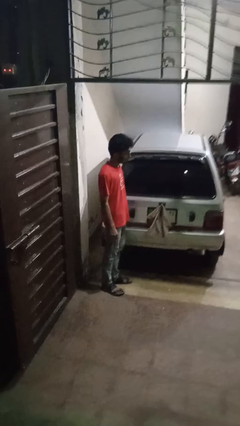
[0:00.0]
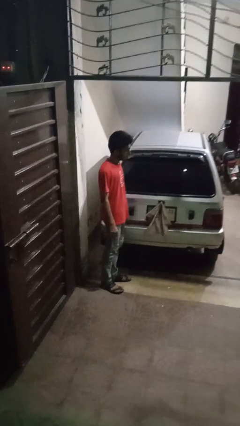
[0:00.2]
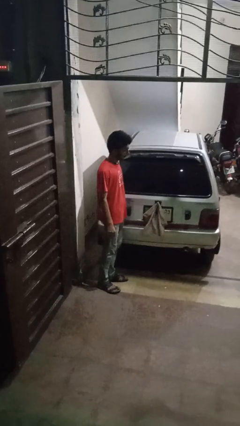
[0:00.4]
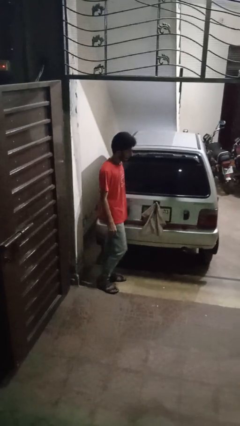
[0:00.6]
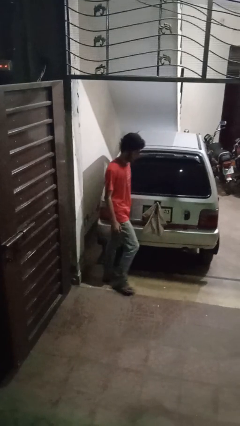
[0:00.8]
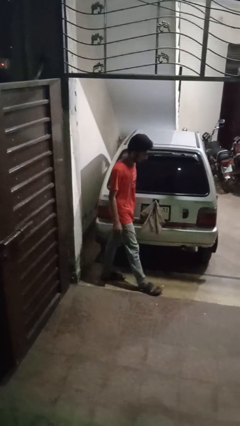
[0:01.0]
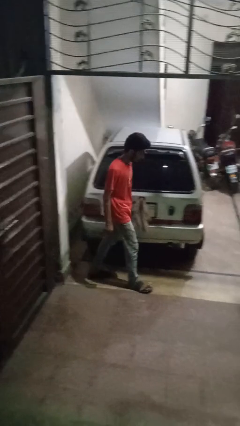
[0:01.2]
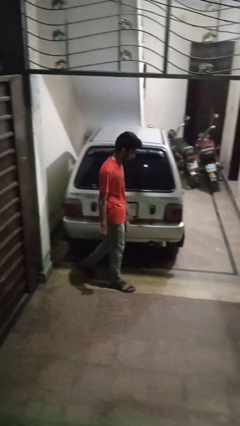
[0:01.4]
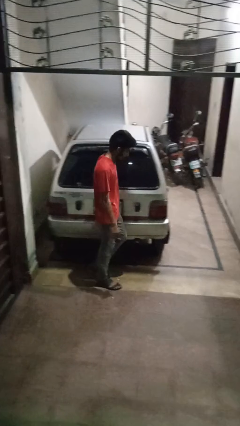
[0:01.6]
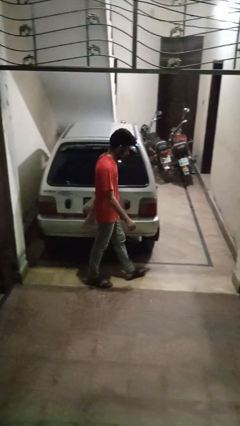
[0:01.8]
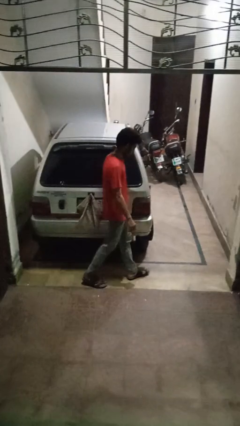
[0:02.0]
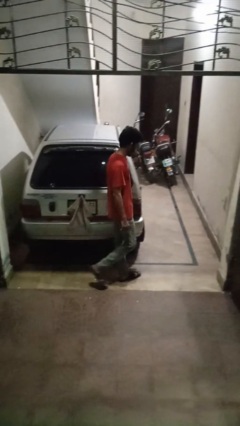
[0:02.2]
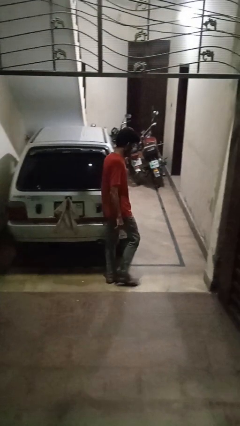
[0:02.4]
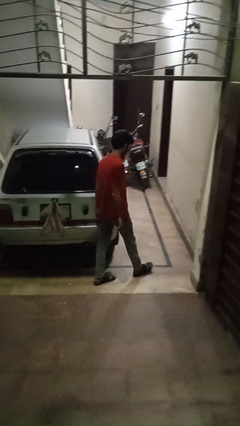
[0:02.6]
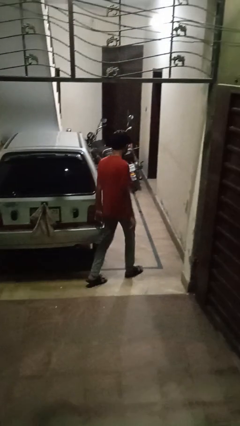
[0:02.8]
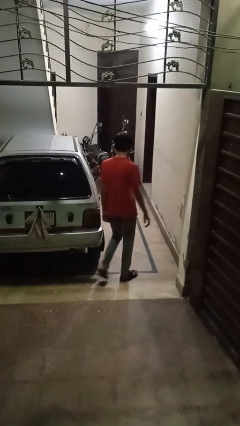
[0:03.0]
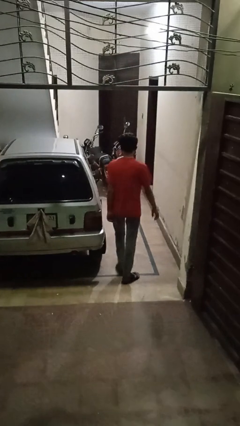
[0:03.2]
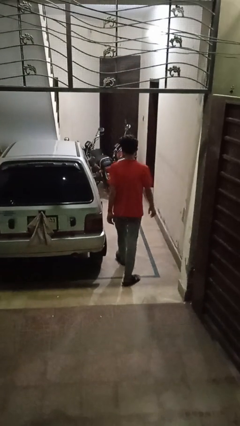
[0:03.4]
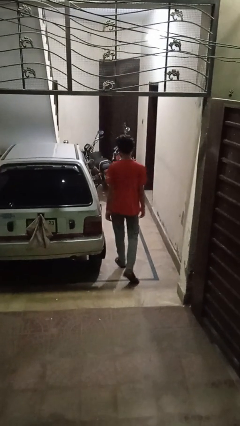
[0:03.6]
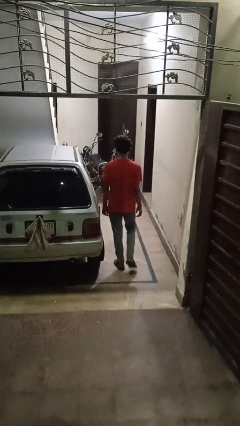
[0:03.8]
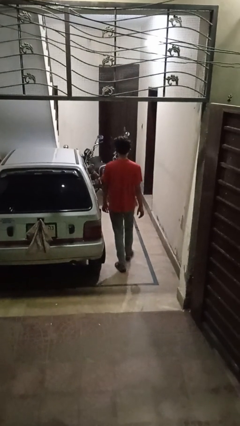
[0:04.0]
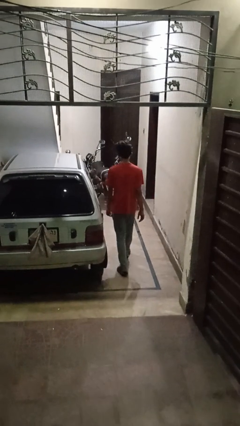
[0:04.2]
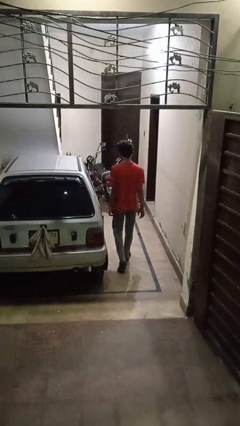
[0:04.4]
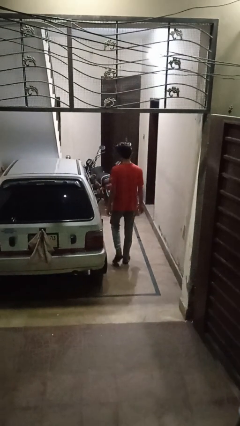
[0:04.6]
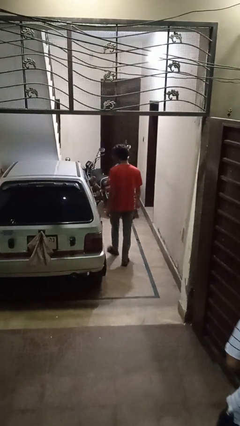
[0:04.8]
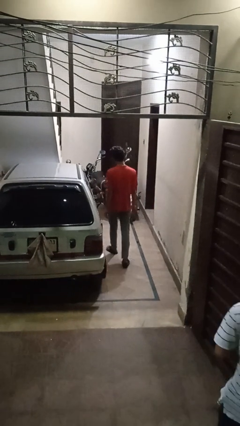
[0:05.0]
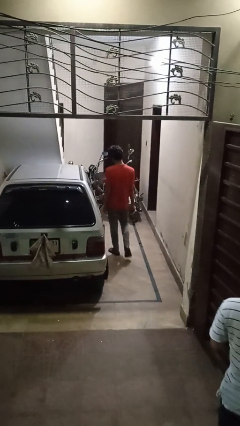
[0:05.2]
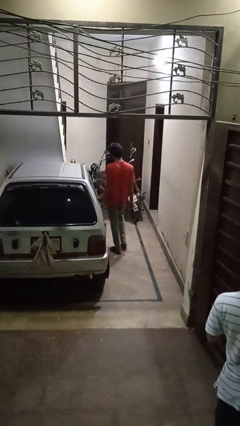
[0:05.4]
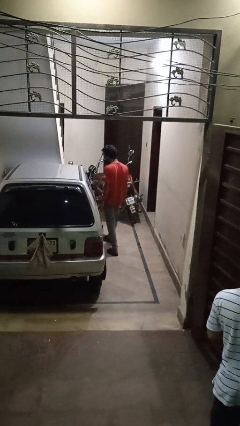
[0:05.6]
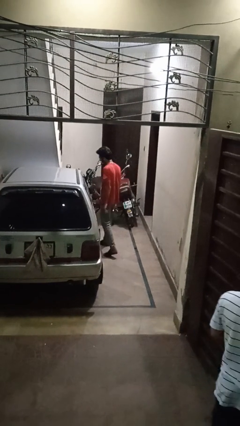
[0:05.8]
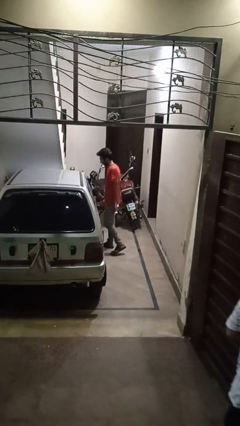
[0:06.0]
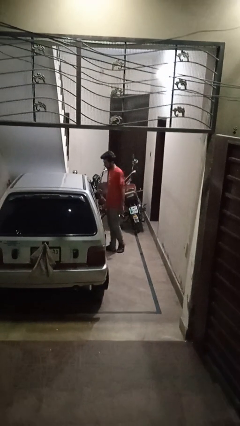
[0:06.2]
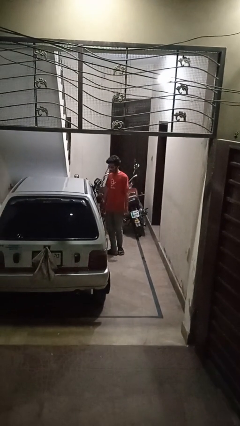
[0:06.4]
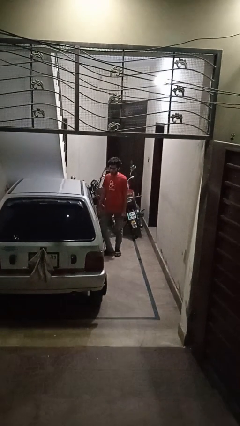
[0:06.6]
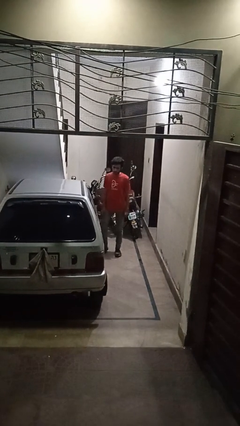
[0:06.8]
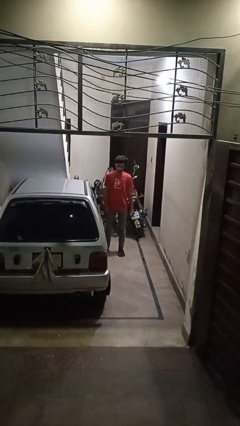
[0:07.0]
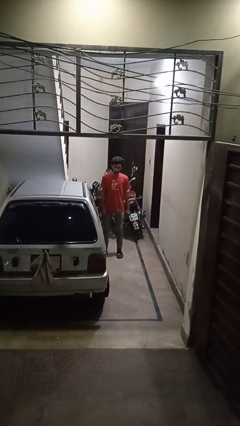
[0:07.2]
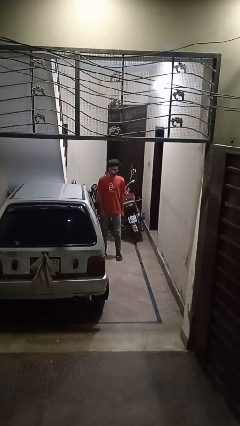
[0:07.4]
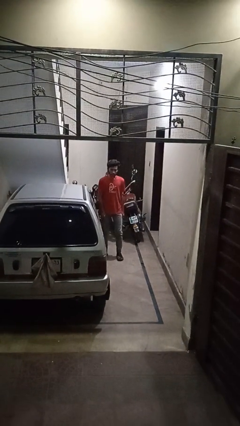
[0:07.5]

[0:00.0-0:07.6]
person walks around car

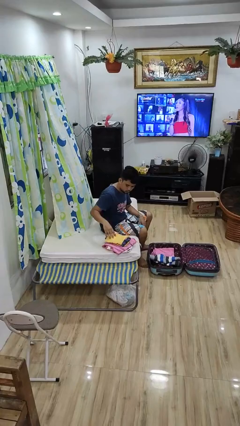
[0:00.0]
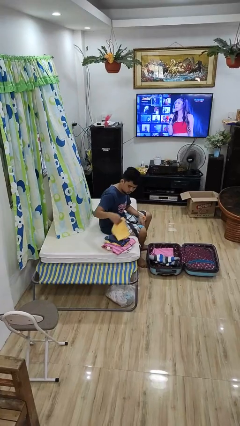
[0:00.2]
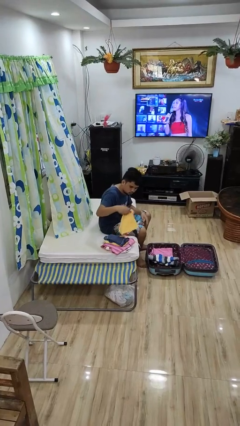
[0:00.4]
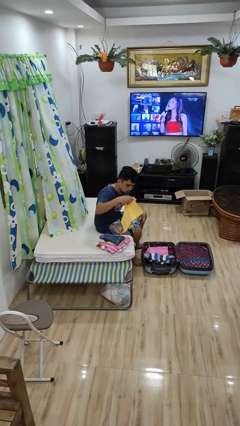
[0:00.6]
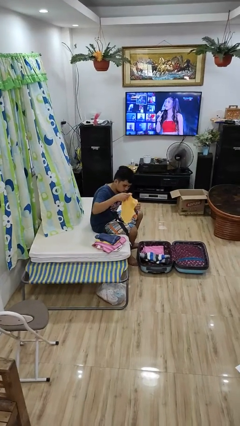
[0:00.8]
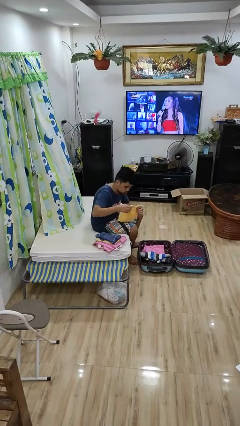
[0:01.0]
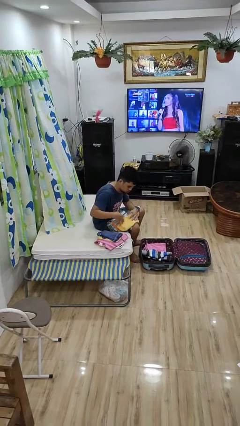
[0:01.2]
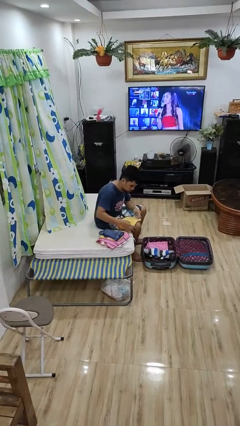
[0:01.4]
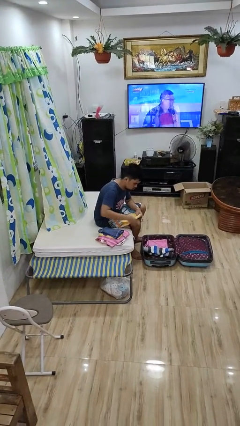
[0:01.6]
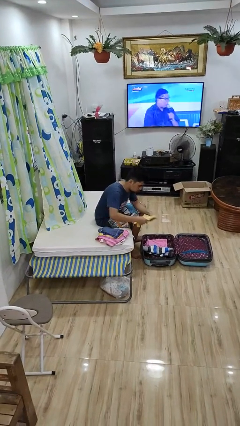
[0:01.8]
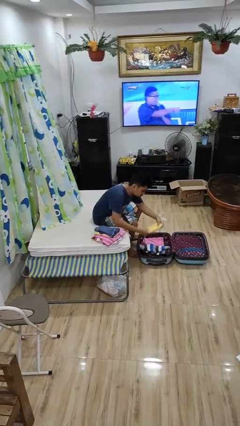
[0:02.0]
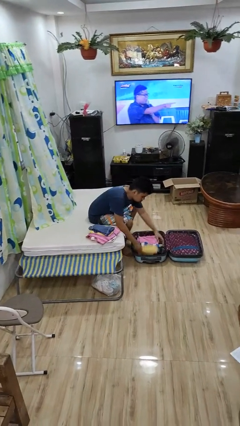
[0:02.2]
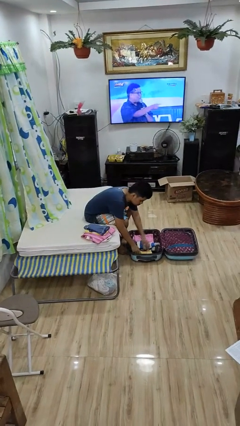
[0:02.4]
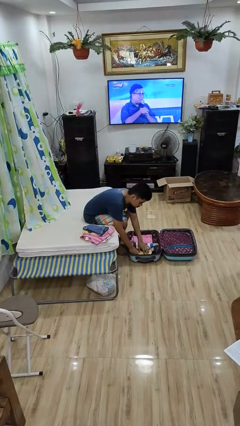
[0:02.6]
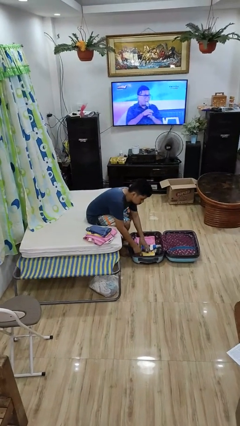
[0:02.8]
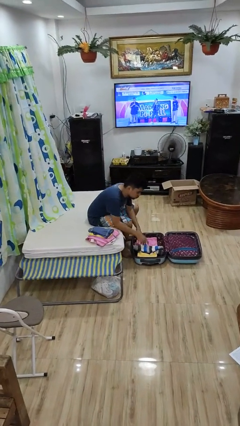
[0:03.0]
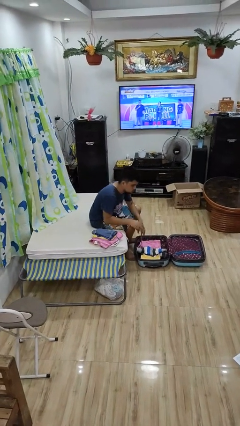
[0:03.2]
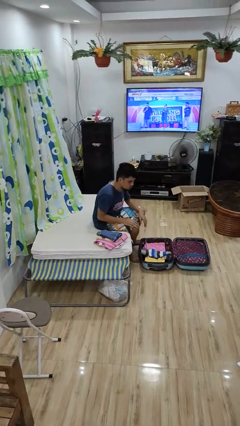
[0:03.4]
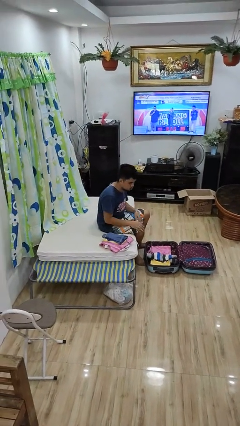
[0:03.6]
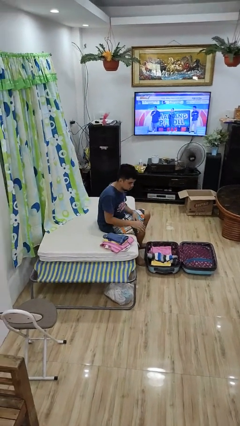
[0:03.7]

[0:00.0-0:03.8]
person loads clothes into suitcase

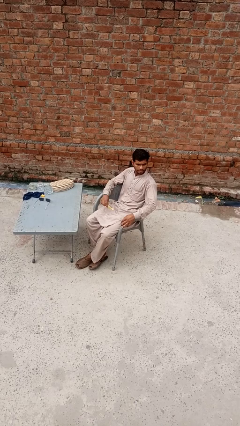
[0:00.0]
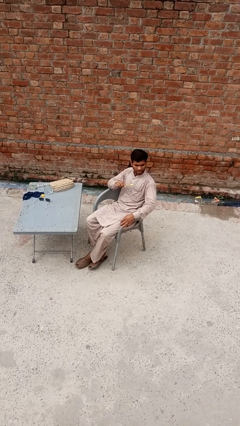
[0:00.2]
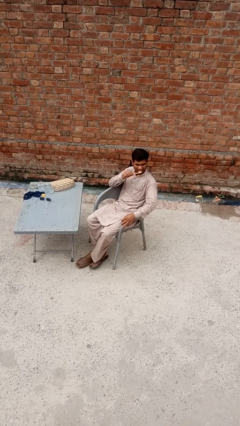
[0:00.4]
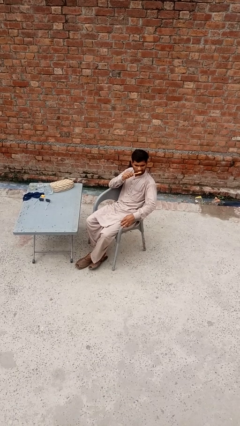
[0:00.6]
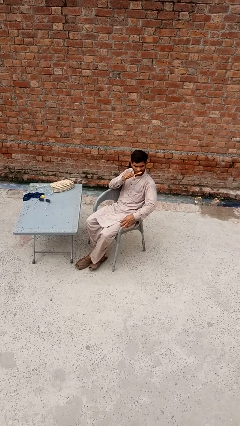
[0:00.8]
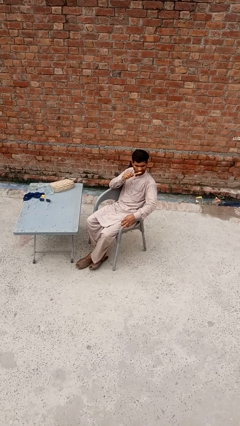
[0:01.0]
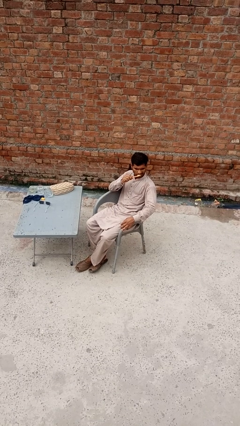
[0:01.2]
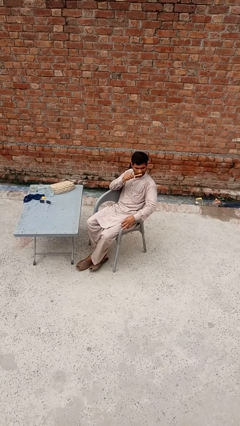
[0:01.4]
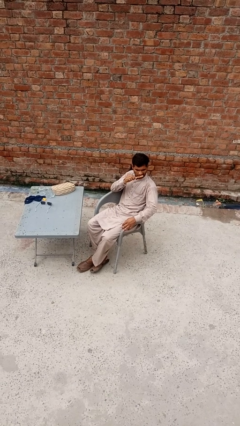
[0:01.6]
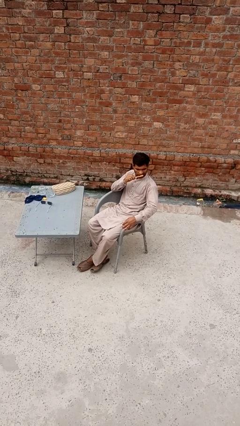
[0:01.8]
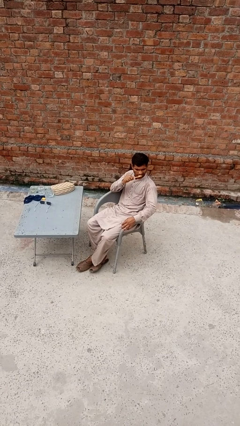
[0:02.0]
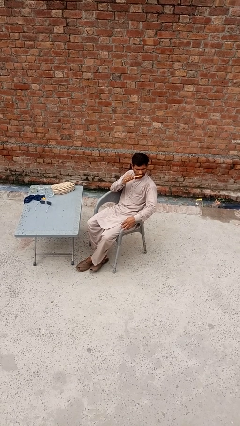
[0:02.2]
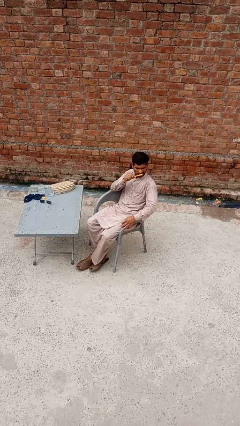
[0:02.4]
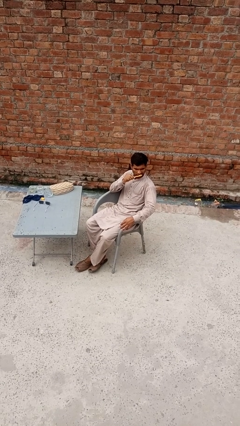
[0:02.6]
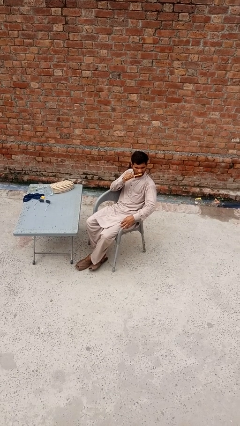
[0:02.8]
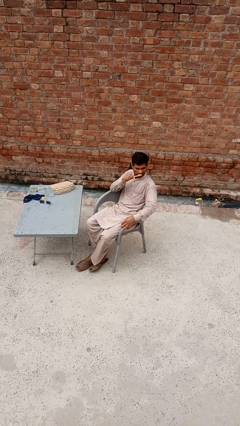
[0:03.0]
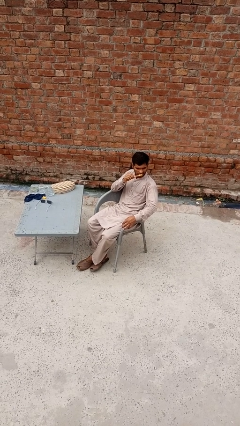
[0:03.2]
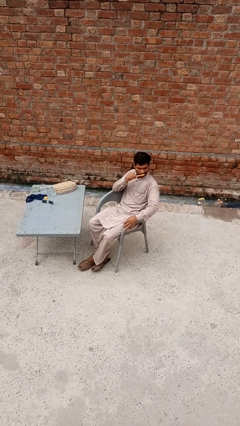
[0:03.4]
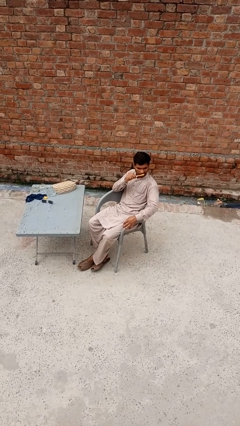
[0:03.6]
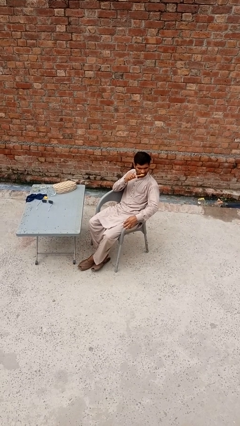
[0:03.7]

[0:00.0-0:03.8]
person brushes teeth

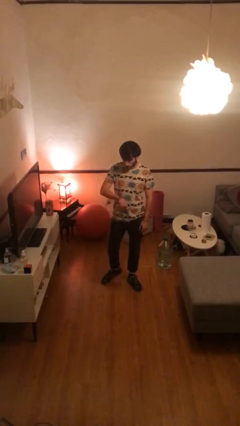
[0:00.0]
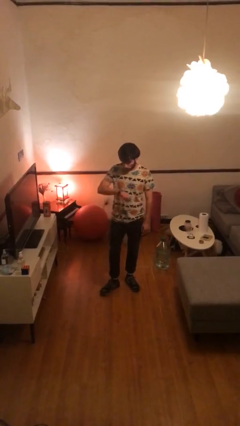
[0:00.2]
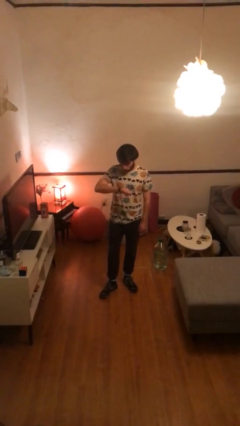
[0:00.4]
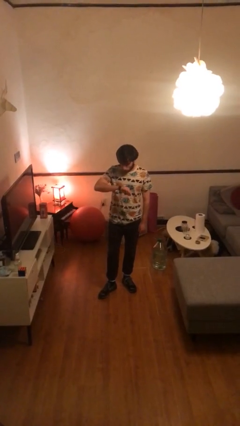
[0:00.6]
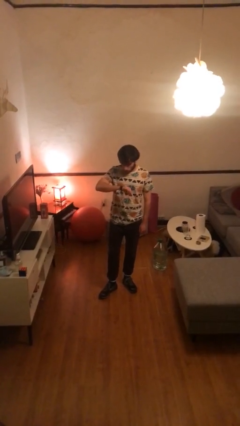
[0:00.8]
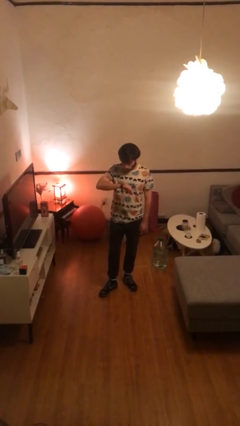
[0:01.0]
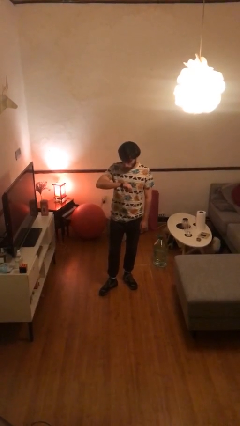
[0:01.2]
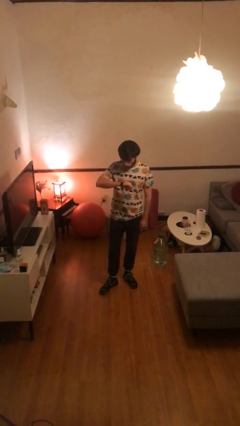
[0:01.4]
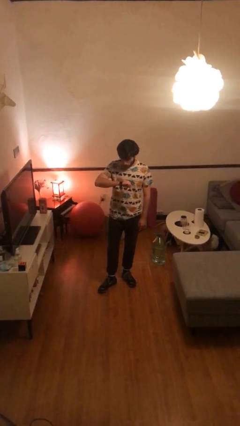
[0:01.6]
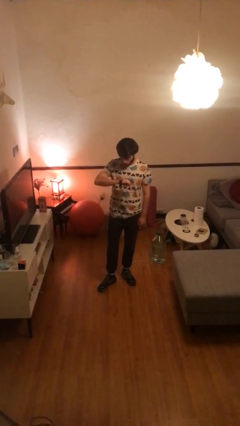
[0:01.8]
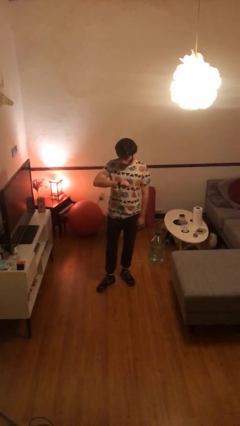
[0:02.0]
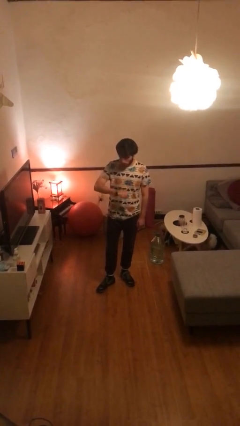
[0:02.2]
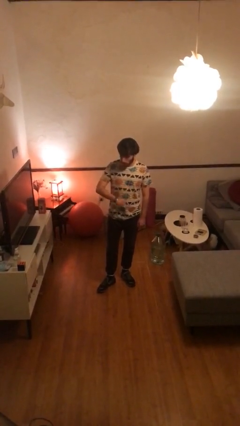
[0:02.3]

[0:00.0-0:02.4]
person looks at wristwatch
